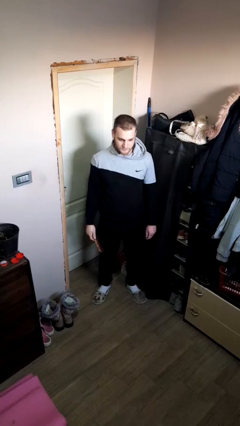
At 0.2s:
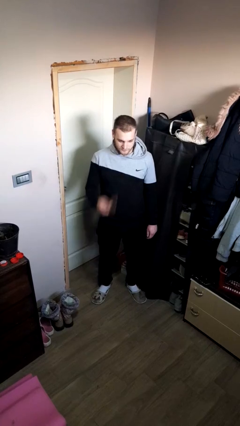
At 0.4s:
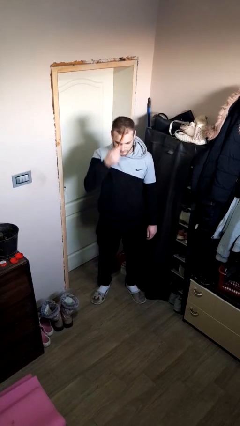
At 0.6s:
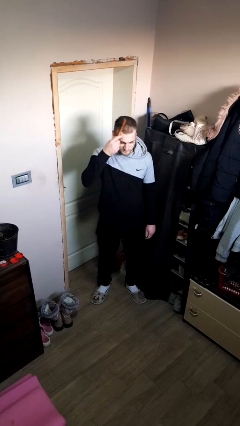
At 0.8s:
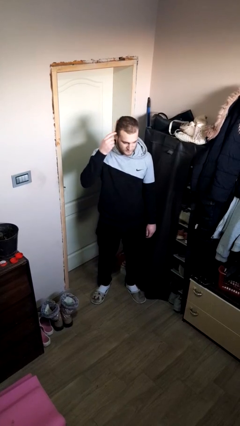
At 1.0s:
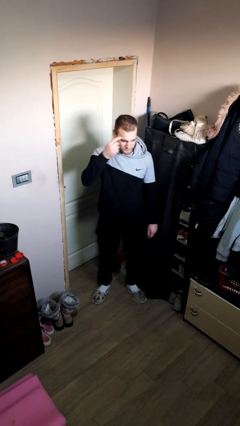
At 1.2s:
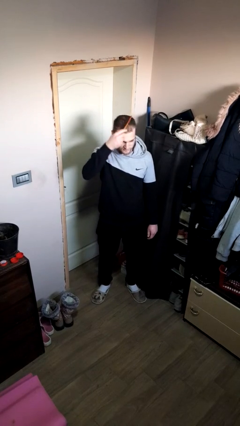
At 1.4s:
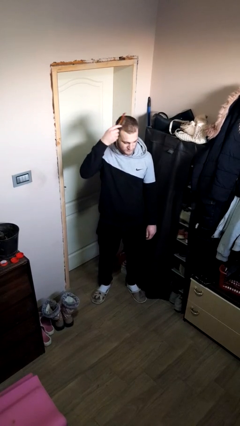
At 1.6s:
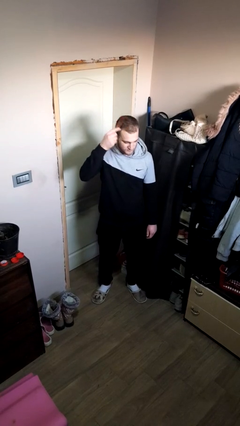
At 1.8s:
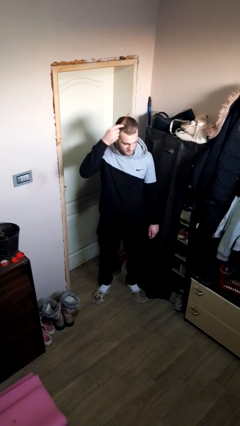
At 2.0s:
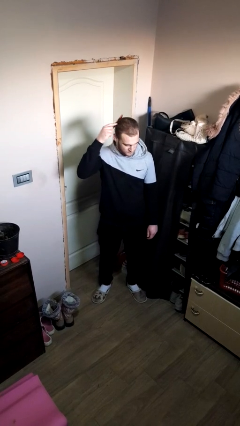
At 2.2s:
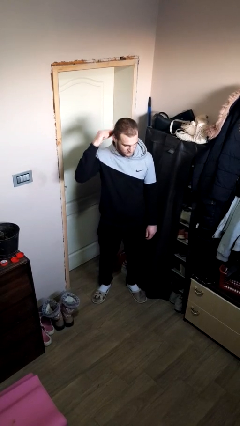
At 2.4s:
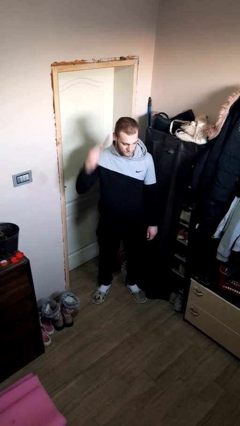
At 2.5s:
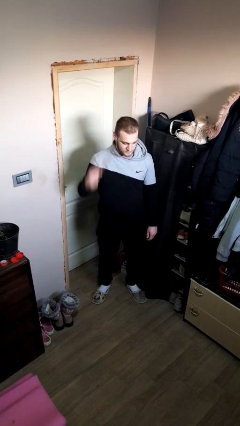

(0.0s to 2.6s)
person brushes hair

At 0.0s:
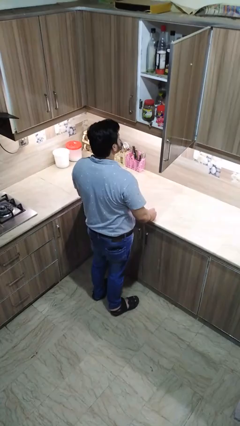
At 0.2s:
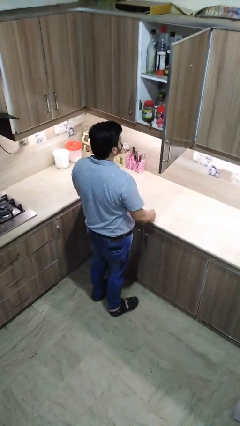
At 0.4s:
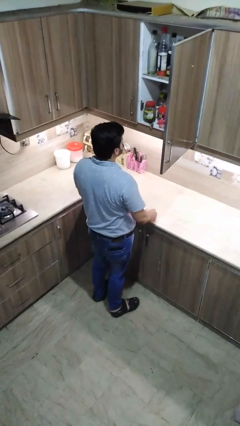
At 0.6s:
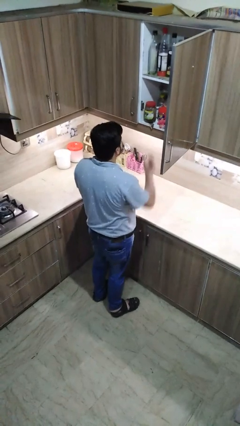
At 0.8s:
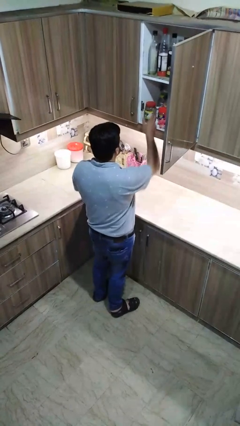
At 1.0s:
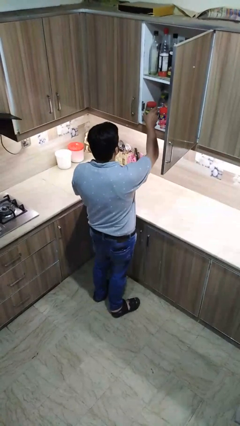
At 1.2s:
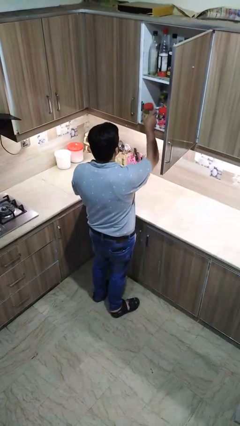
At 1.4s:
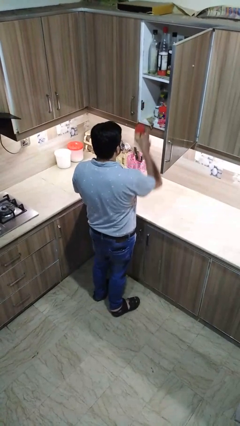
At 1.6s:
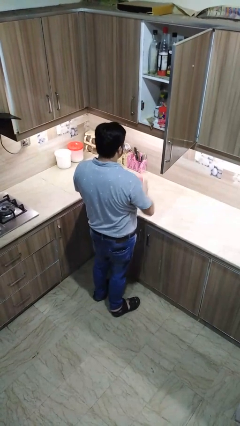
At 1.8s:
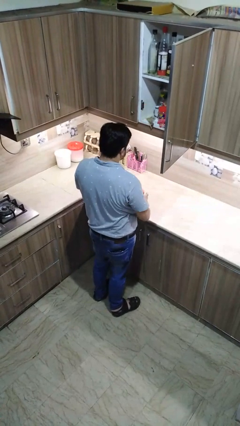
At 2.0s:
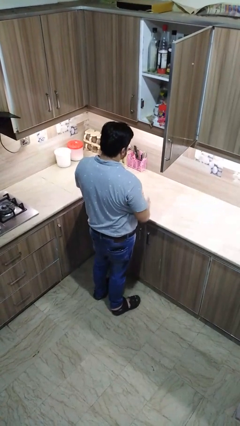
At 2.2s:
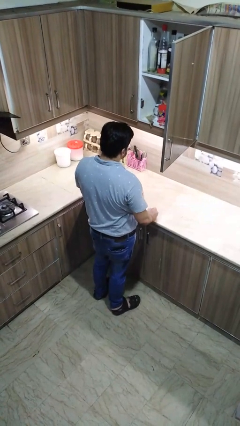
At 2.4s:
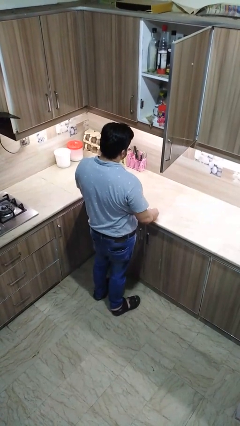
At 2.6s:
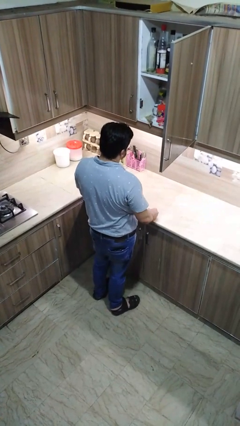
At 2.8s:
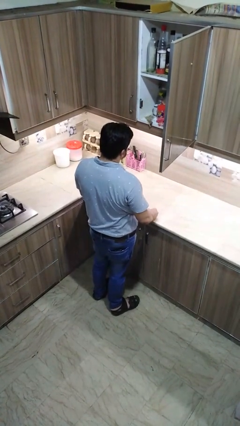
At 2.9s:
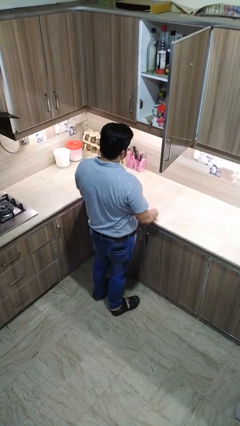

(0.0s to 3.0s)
person puts object in cabinet

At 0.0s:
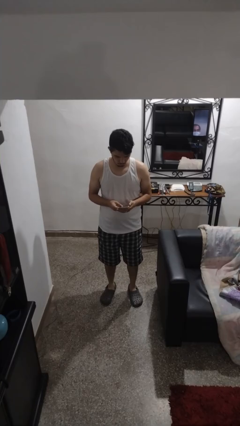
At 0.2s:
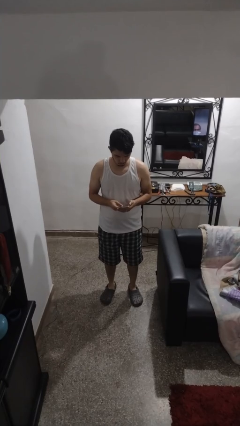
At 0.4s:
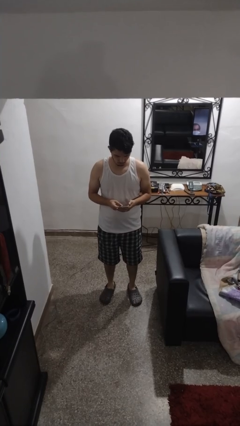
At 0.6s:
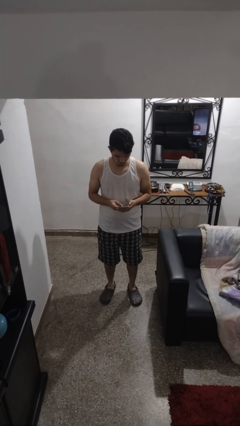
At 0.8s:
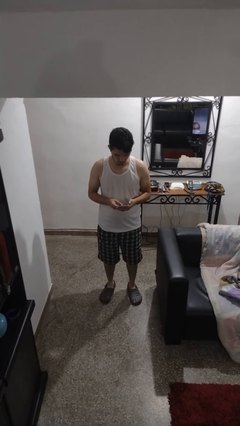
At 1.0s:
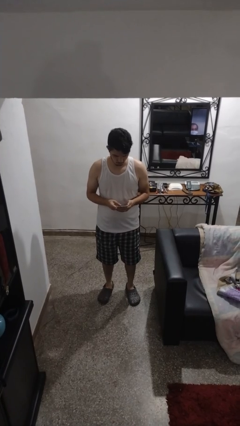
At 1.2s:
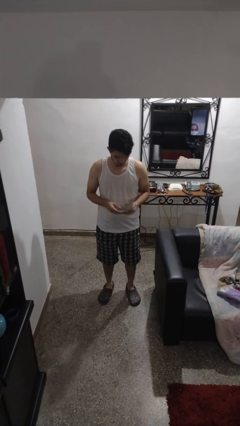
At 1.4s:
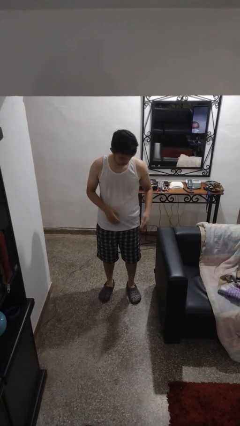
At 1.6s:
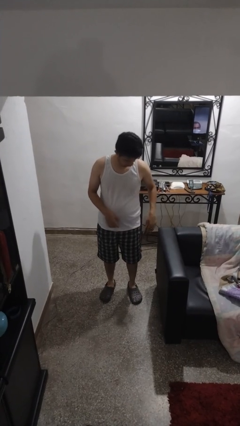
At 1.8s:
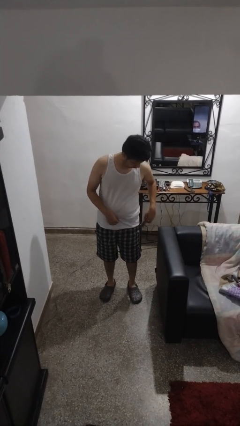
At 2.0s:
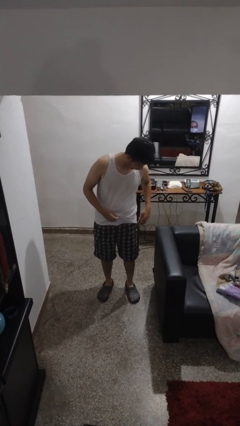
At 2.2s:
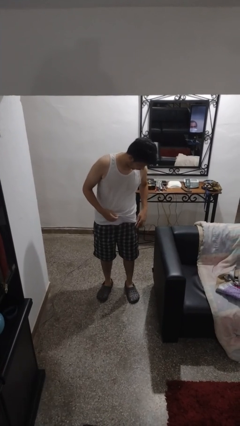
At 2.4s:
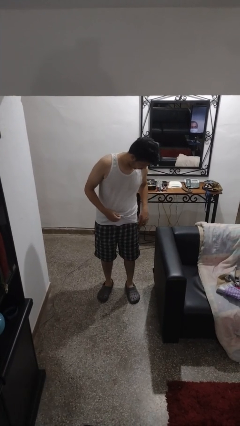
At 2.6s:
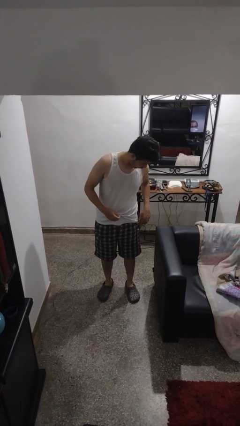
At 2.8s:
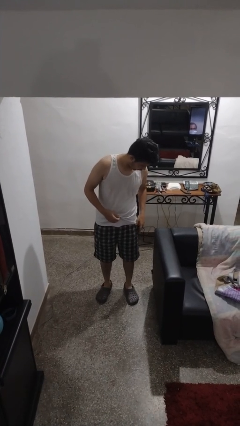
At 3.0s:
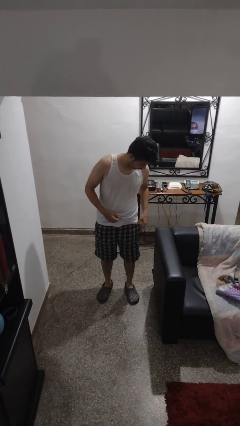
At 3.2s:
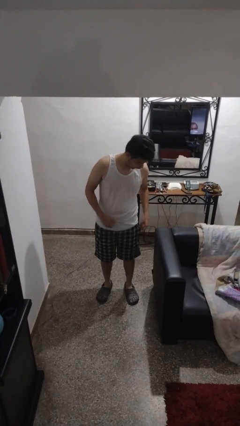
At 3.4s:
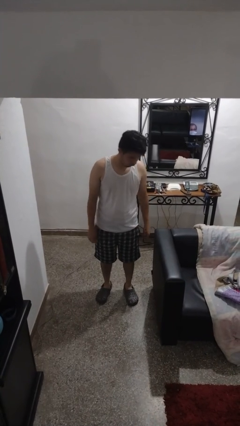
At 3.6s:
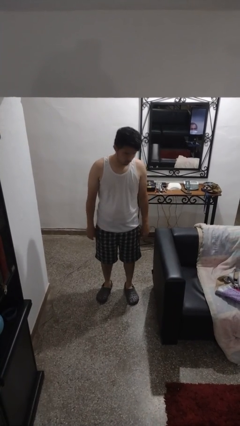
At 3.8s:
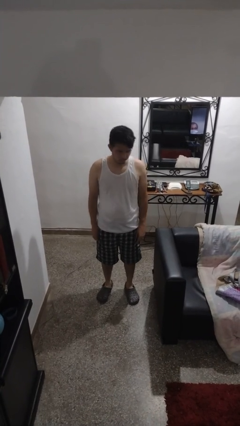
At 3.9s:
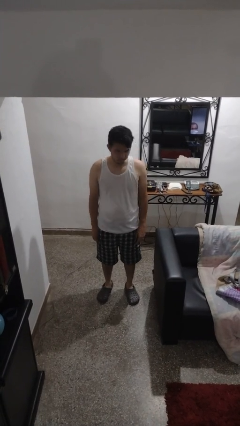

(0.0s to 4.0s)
person puts phone into pocket

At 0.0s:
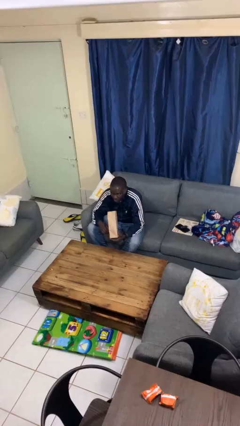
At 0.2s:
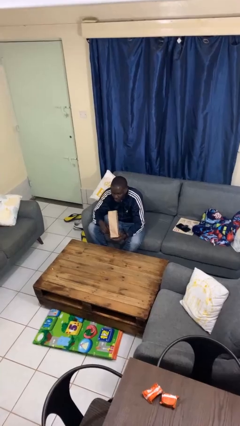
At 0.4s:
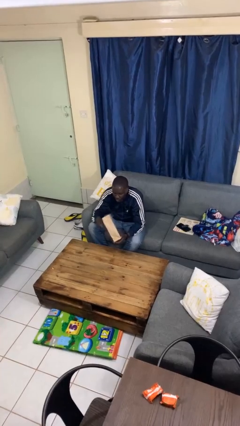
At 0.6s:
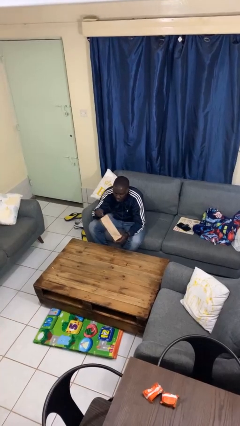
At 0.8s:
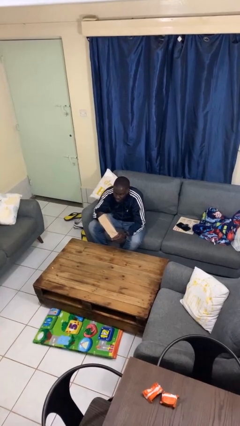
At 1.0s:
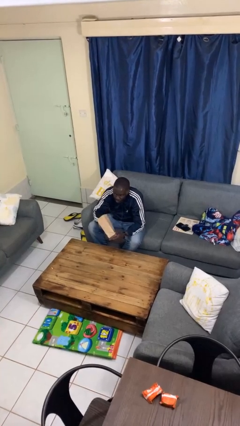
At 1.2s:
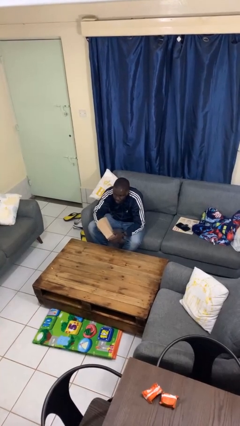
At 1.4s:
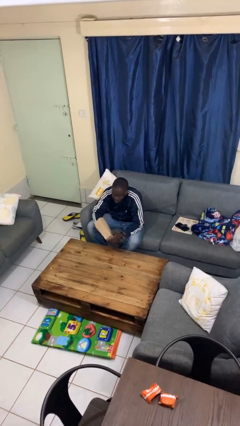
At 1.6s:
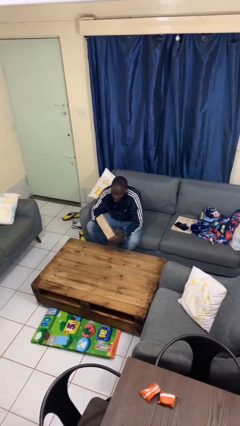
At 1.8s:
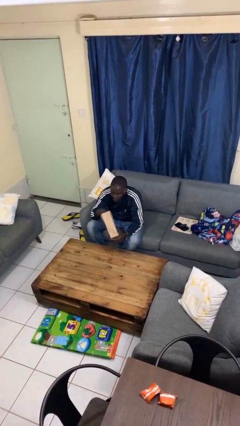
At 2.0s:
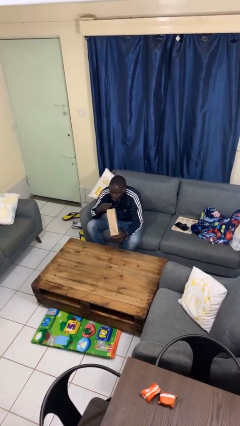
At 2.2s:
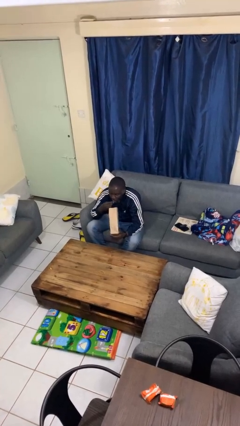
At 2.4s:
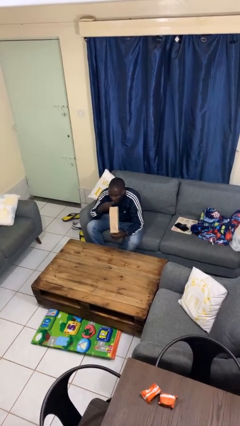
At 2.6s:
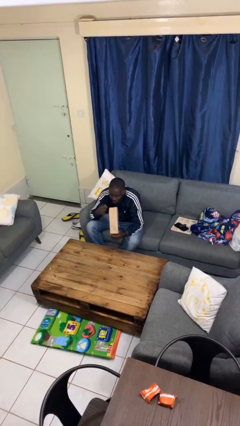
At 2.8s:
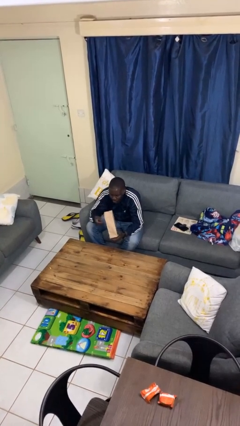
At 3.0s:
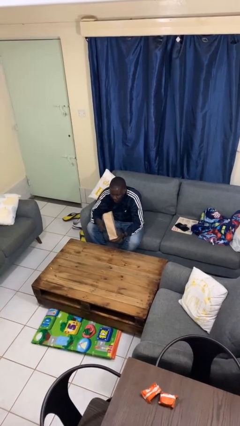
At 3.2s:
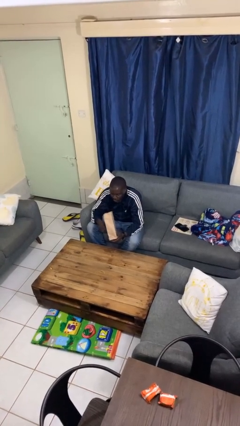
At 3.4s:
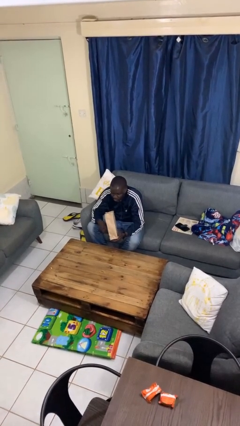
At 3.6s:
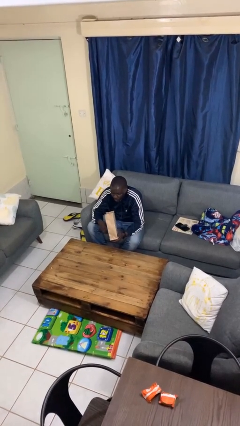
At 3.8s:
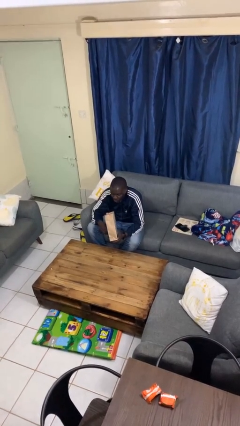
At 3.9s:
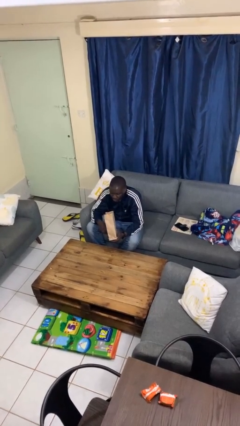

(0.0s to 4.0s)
person eats snack from bag

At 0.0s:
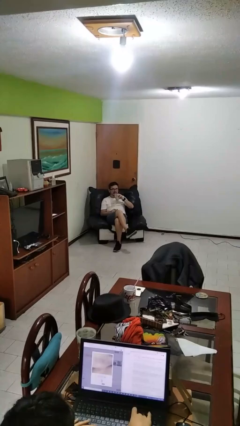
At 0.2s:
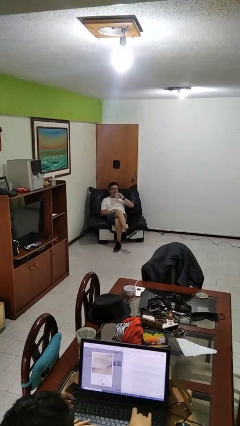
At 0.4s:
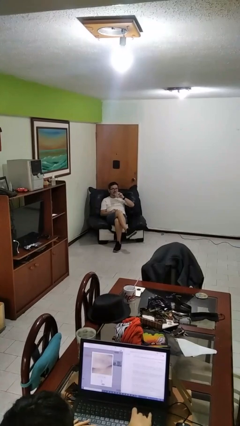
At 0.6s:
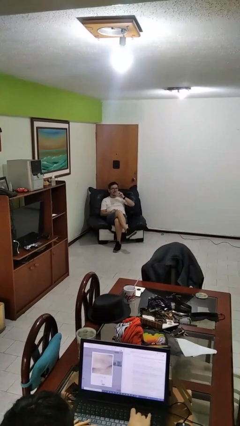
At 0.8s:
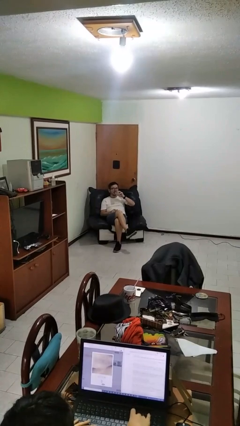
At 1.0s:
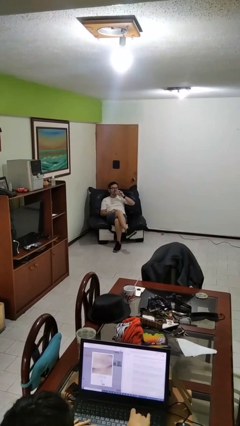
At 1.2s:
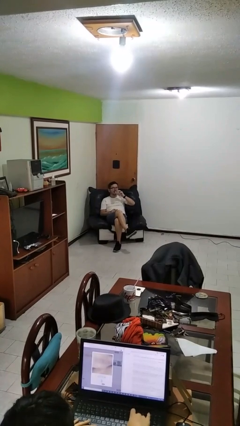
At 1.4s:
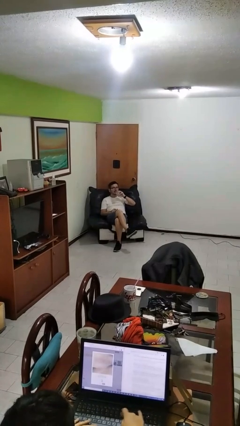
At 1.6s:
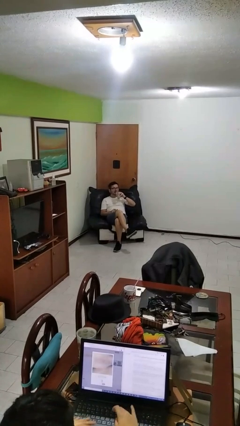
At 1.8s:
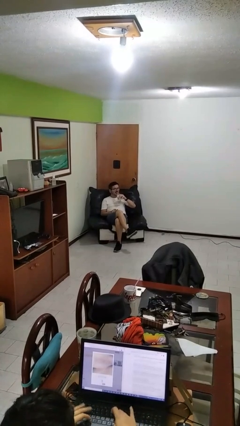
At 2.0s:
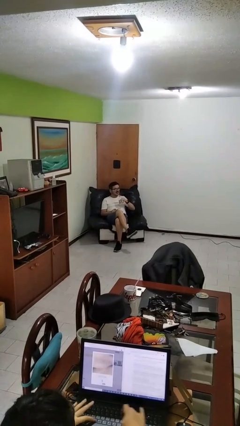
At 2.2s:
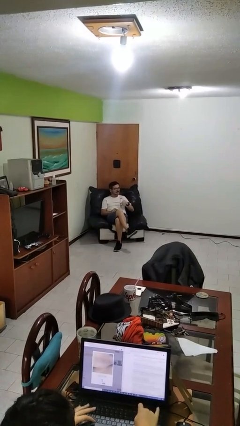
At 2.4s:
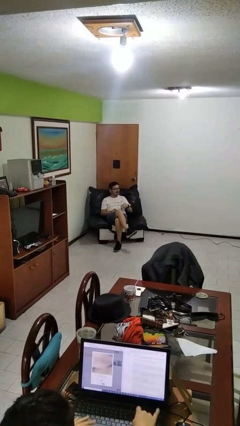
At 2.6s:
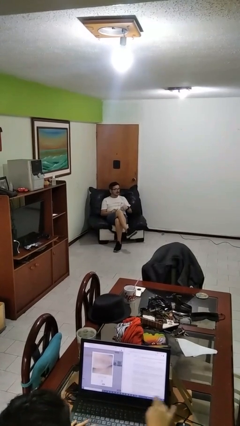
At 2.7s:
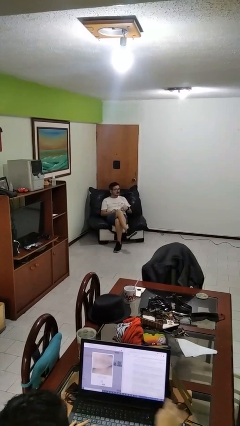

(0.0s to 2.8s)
person drinks from bottle

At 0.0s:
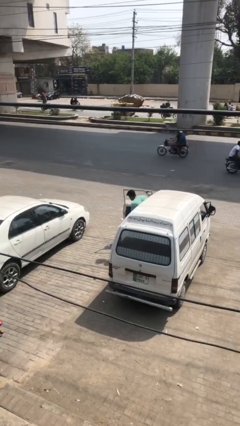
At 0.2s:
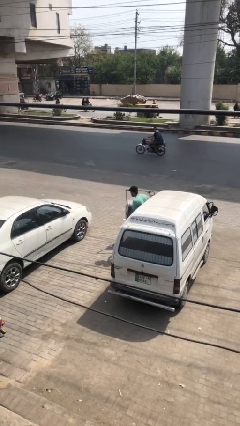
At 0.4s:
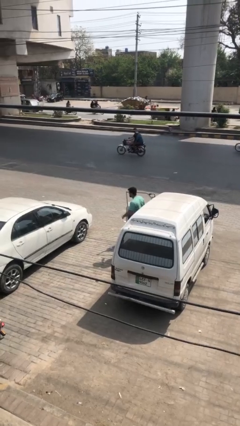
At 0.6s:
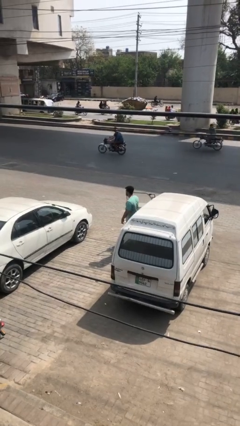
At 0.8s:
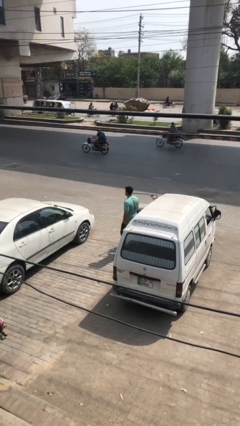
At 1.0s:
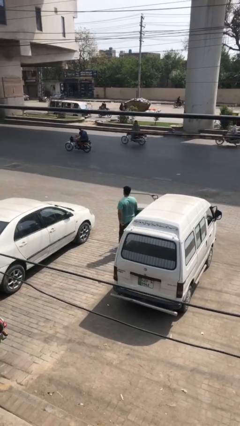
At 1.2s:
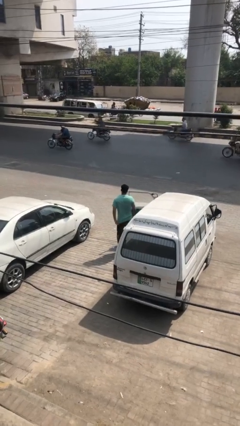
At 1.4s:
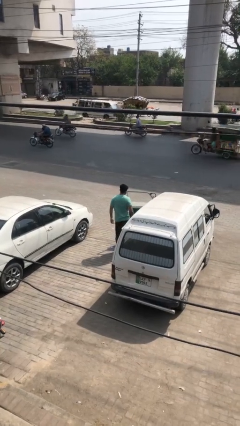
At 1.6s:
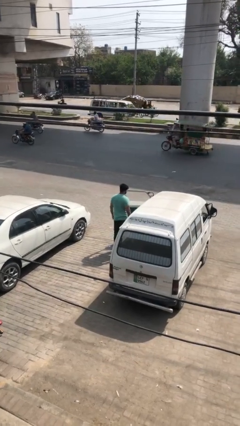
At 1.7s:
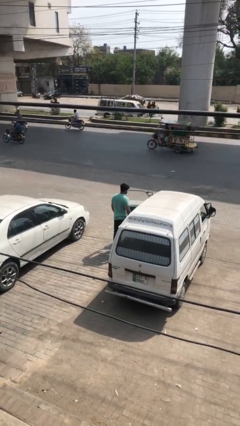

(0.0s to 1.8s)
person exits car
